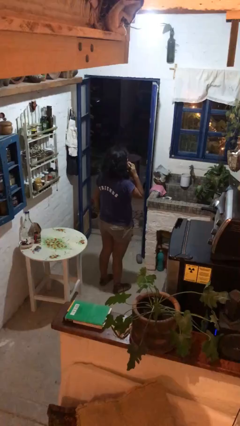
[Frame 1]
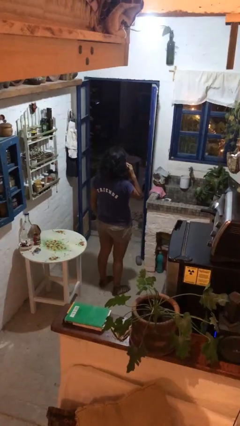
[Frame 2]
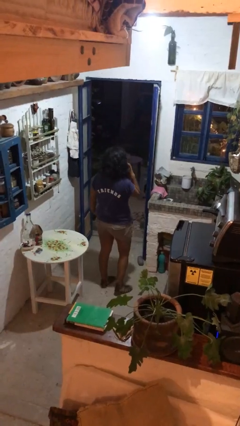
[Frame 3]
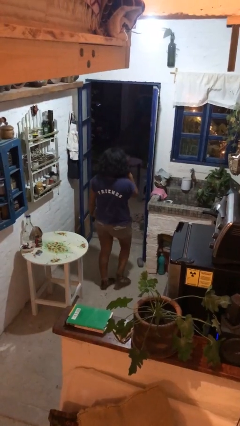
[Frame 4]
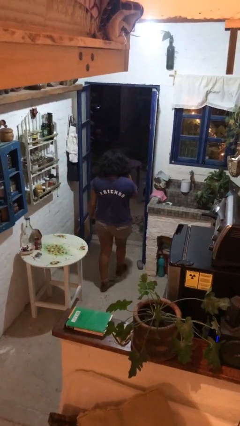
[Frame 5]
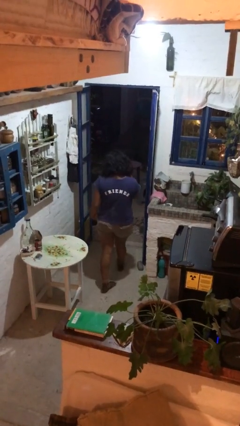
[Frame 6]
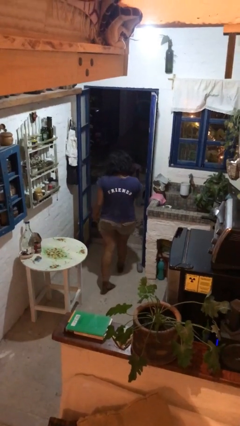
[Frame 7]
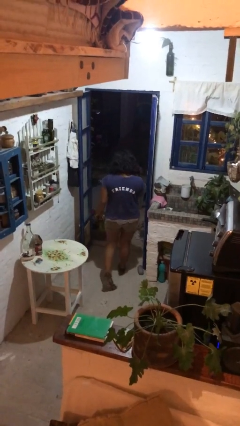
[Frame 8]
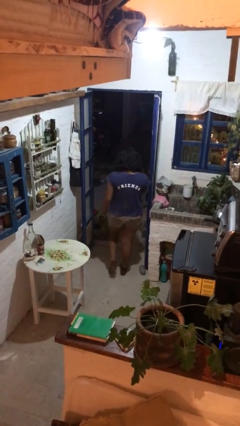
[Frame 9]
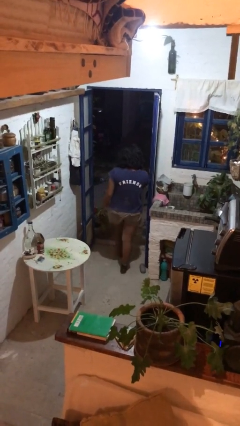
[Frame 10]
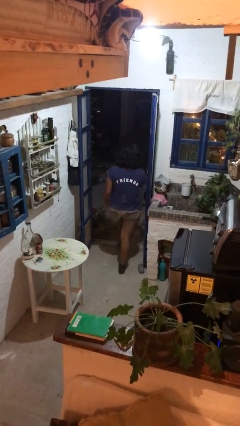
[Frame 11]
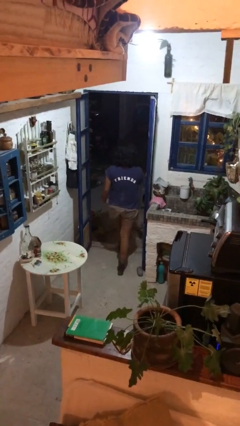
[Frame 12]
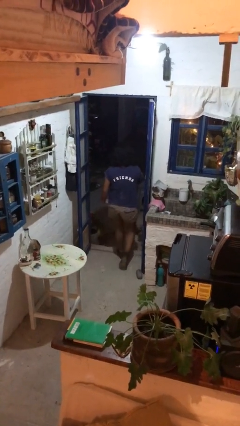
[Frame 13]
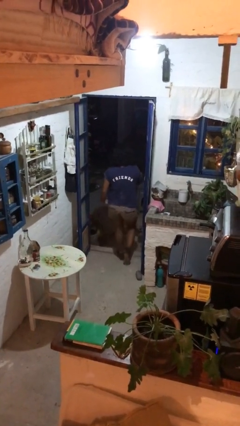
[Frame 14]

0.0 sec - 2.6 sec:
person exits scene through structure

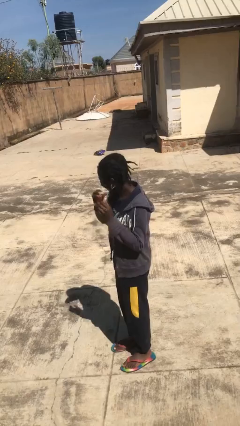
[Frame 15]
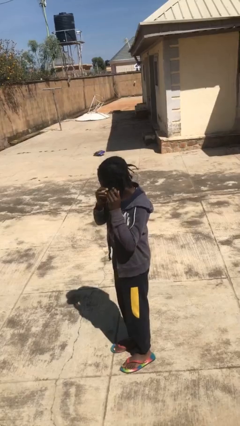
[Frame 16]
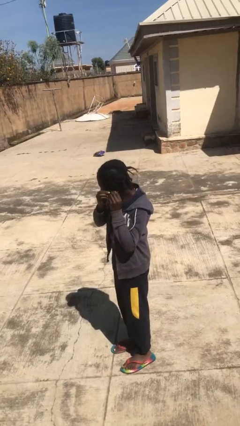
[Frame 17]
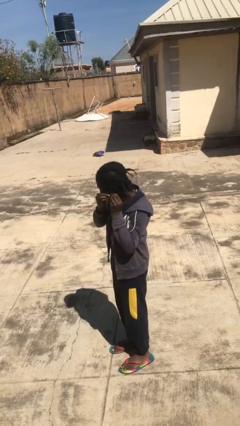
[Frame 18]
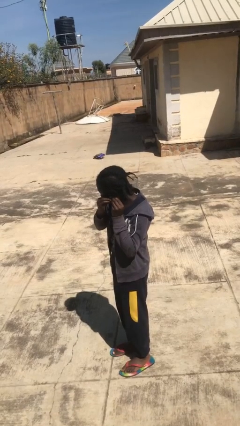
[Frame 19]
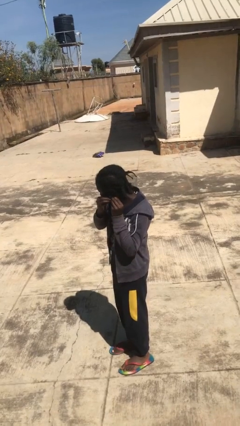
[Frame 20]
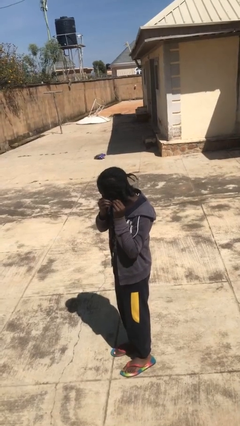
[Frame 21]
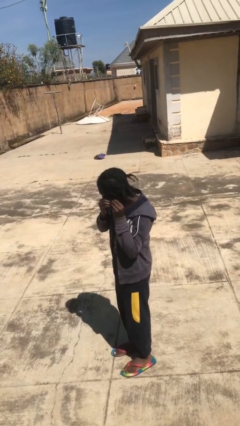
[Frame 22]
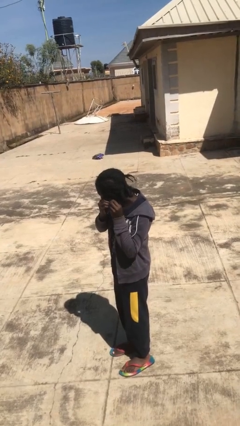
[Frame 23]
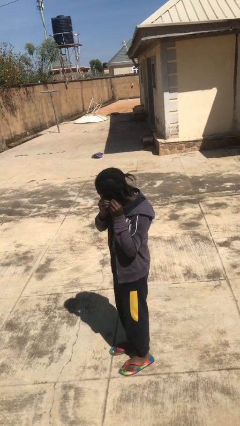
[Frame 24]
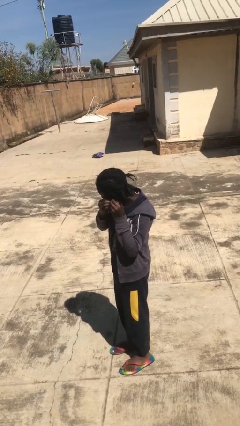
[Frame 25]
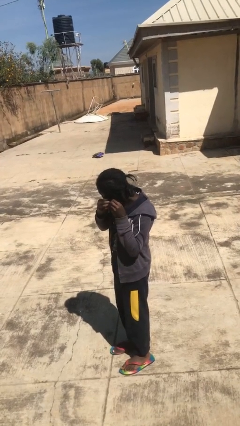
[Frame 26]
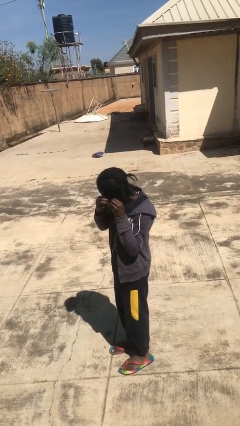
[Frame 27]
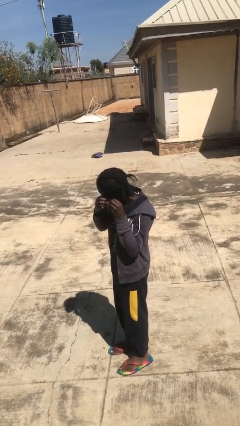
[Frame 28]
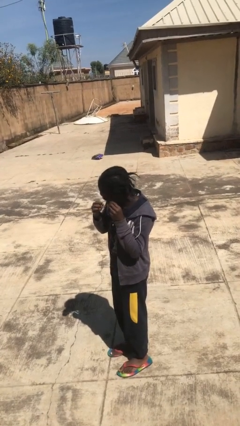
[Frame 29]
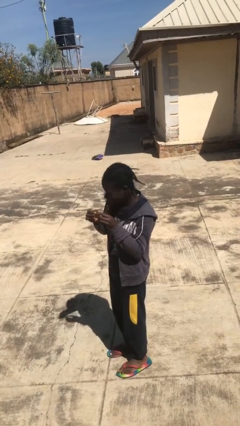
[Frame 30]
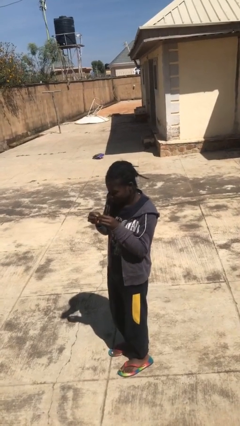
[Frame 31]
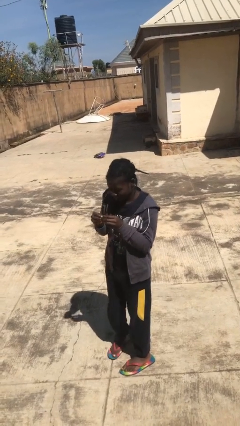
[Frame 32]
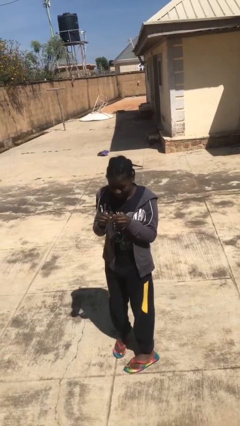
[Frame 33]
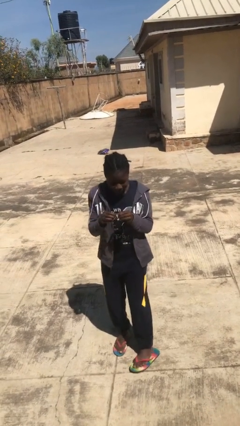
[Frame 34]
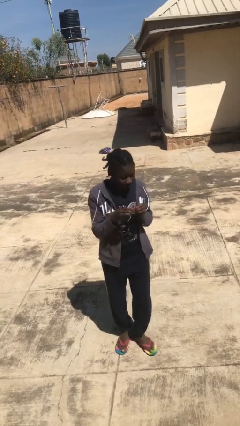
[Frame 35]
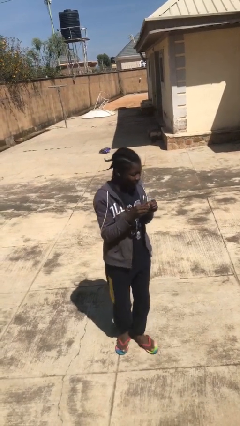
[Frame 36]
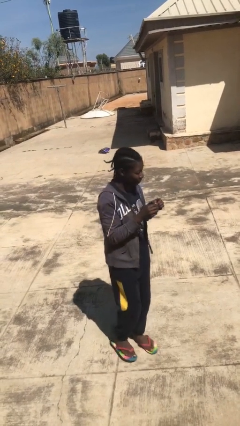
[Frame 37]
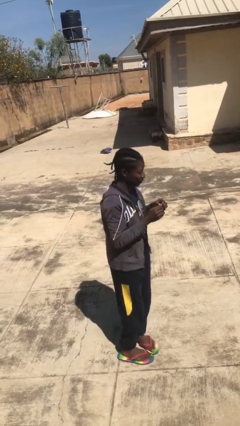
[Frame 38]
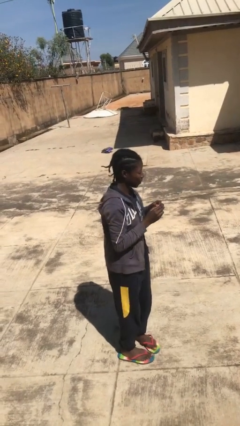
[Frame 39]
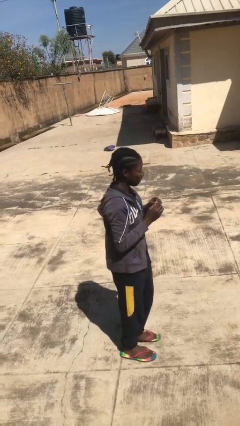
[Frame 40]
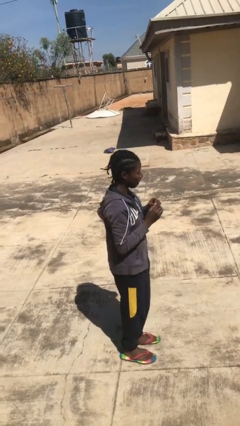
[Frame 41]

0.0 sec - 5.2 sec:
person takes off earrings

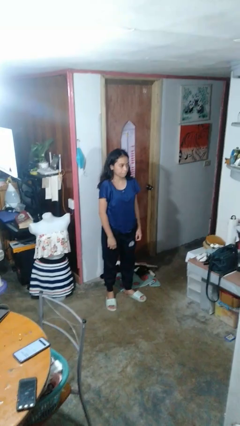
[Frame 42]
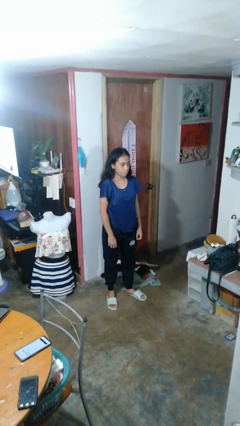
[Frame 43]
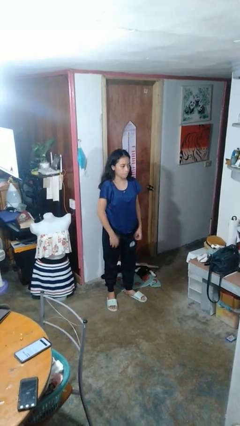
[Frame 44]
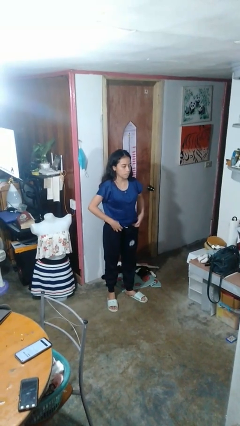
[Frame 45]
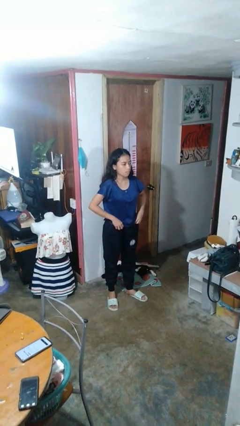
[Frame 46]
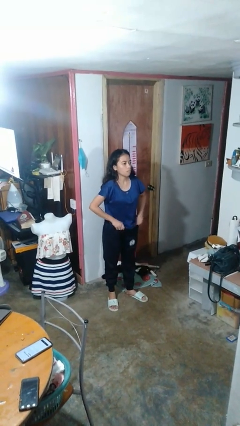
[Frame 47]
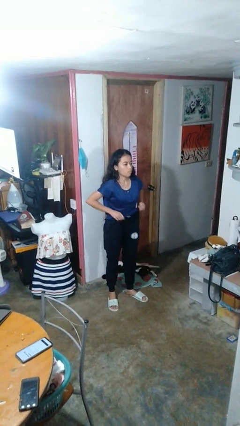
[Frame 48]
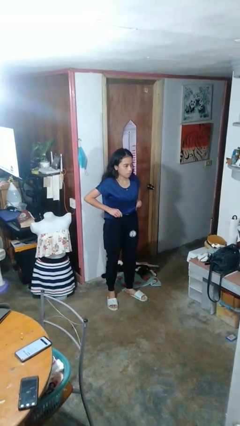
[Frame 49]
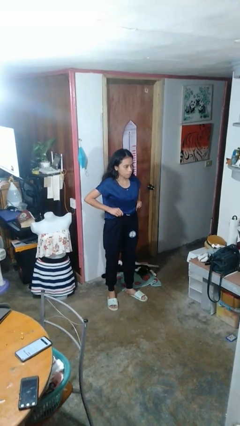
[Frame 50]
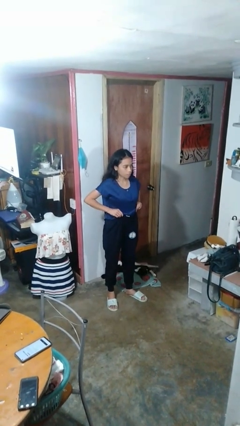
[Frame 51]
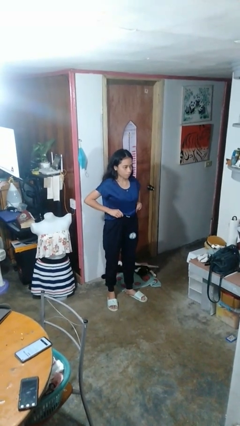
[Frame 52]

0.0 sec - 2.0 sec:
person hikes up pants

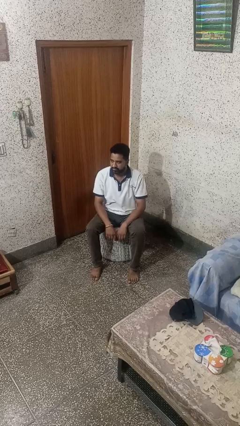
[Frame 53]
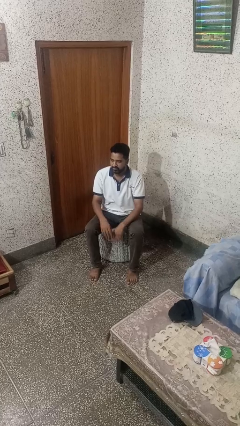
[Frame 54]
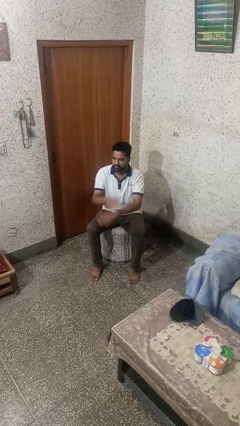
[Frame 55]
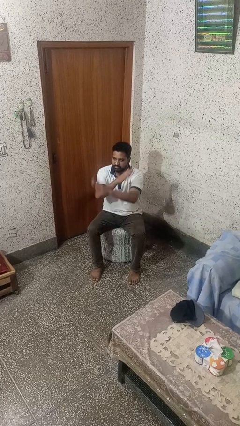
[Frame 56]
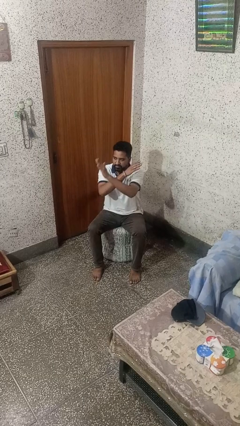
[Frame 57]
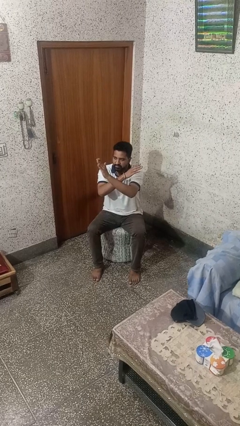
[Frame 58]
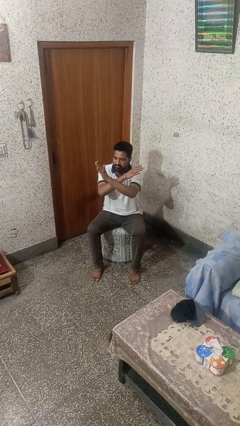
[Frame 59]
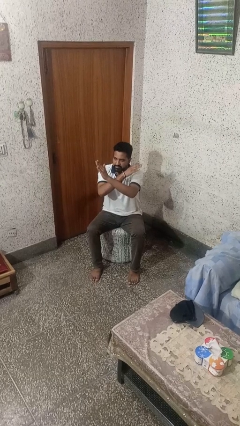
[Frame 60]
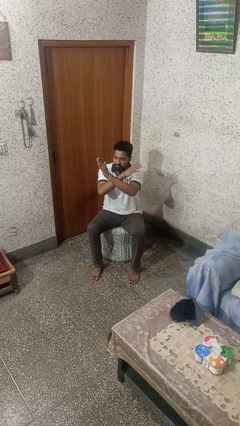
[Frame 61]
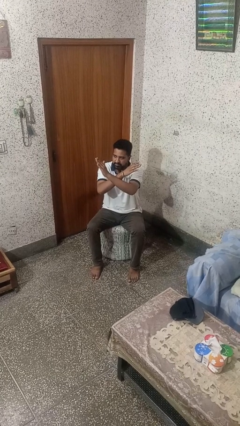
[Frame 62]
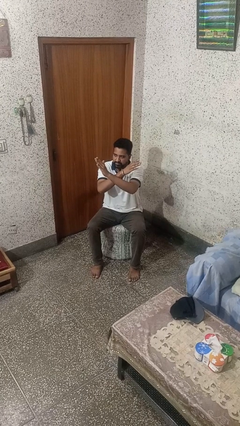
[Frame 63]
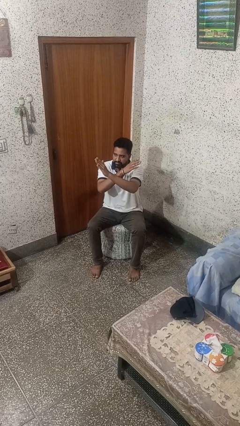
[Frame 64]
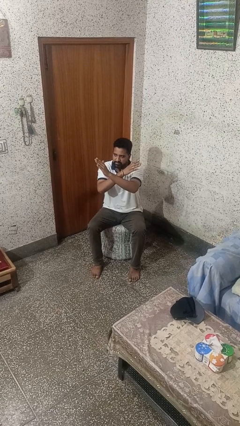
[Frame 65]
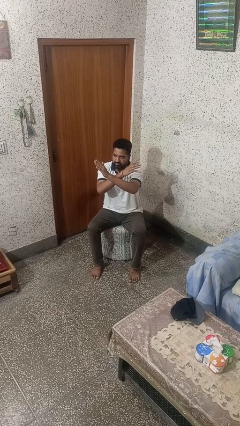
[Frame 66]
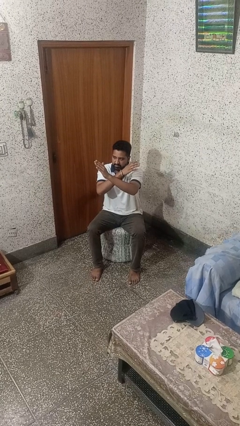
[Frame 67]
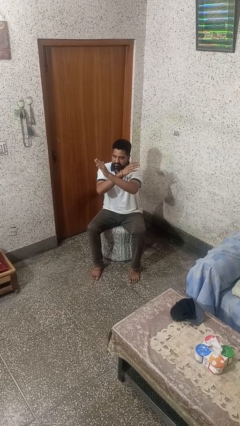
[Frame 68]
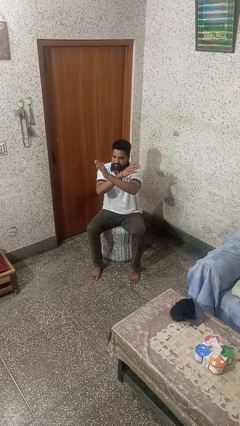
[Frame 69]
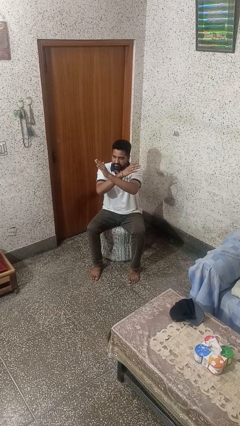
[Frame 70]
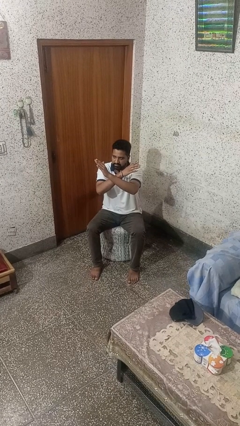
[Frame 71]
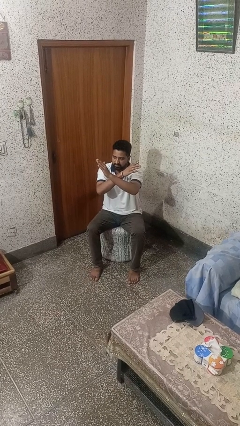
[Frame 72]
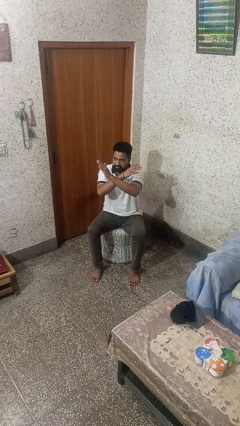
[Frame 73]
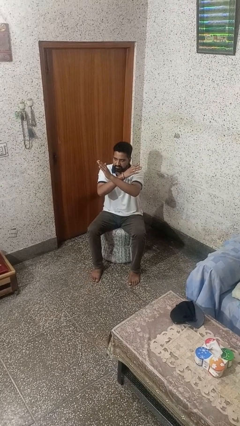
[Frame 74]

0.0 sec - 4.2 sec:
person gestures arms x

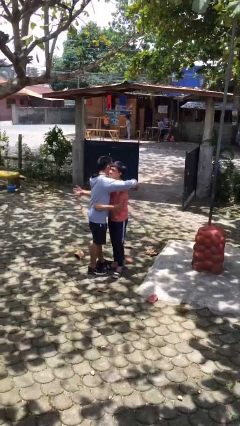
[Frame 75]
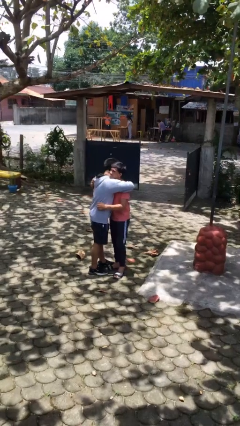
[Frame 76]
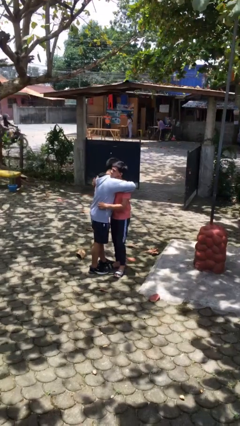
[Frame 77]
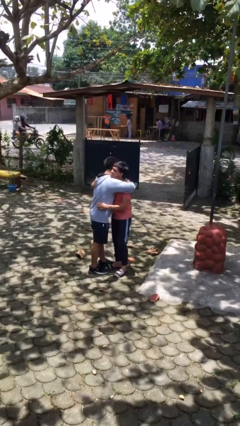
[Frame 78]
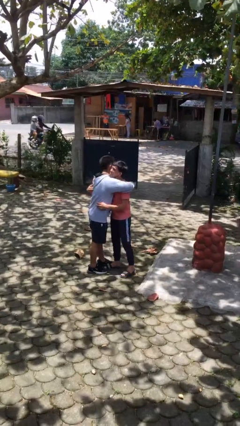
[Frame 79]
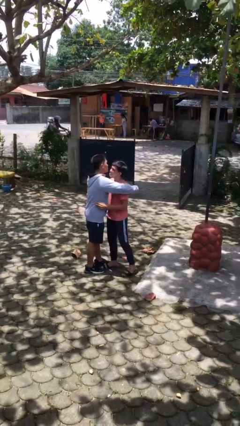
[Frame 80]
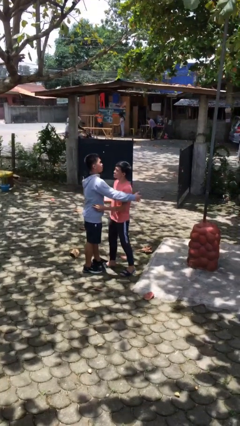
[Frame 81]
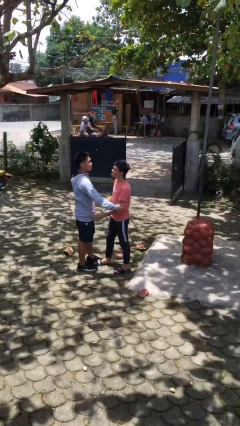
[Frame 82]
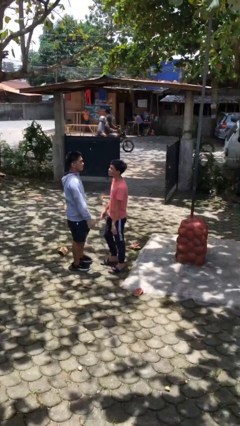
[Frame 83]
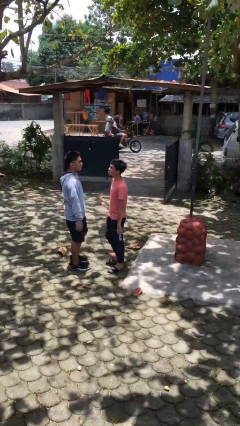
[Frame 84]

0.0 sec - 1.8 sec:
person embraces person

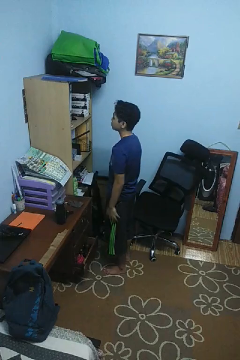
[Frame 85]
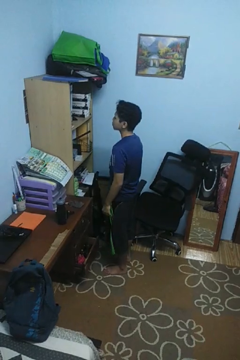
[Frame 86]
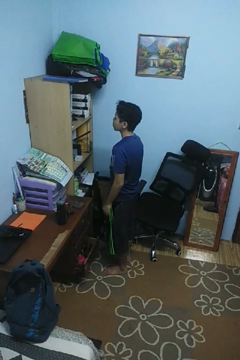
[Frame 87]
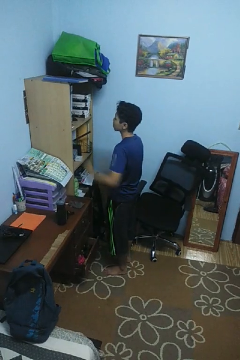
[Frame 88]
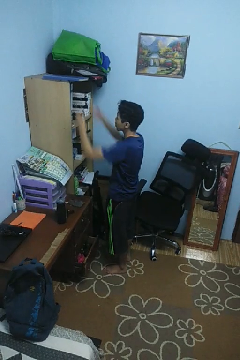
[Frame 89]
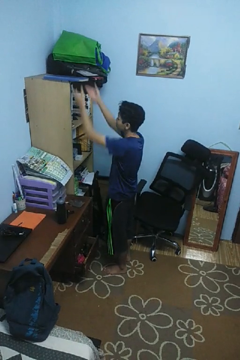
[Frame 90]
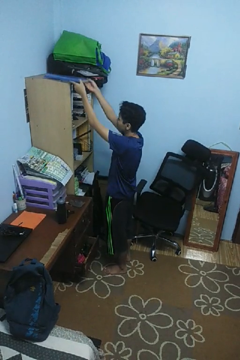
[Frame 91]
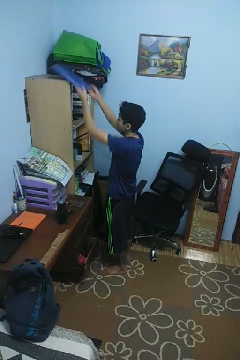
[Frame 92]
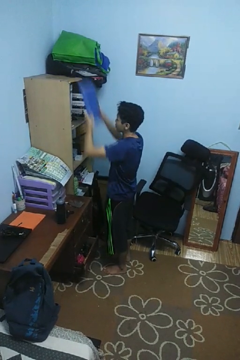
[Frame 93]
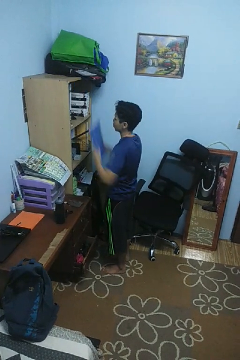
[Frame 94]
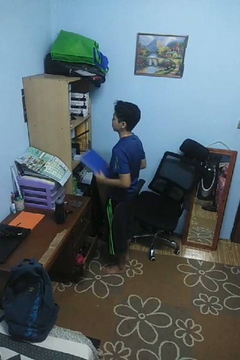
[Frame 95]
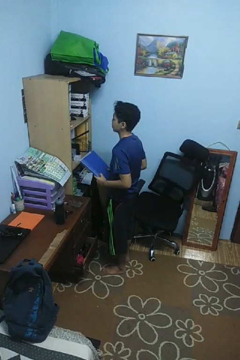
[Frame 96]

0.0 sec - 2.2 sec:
person picks up object from shelf
